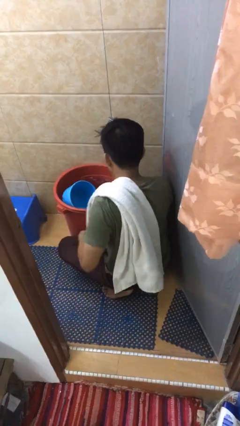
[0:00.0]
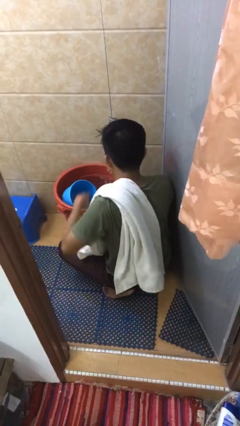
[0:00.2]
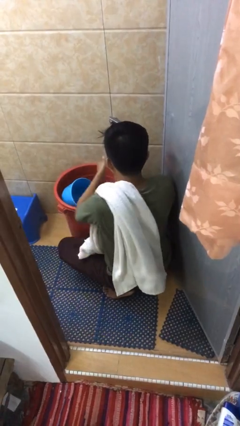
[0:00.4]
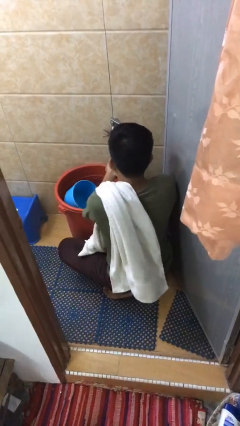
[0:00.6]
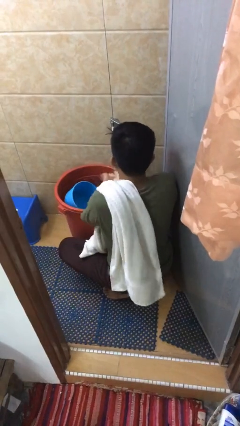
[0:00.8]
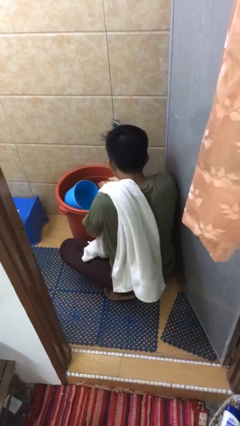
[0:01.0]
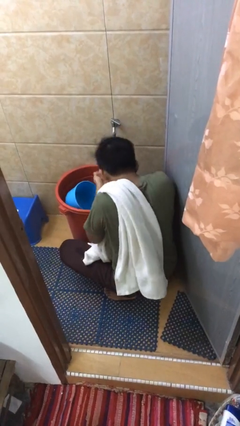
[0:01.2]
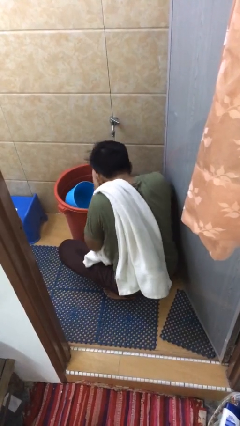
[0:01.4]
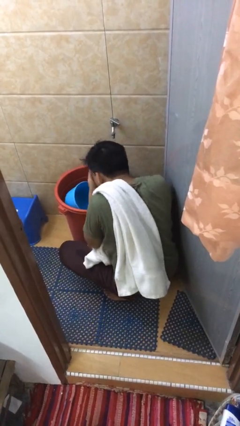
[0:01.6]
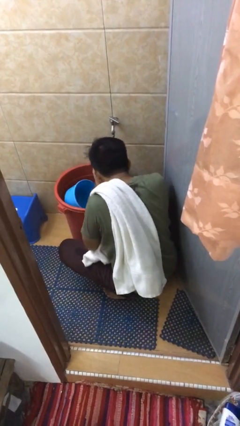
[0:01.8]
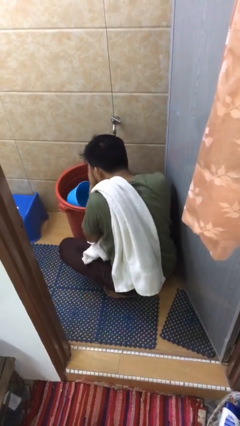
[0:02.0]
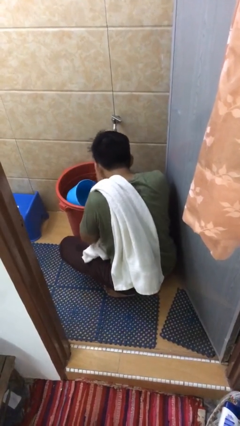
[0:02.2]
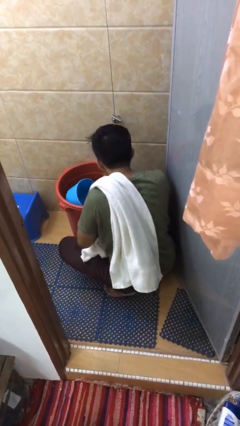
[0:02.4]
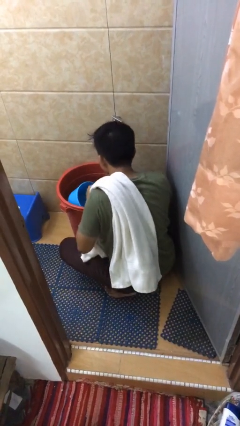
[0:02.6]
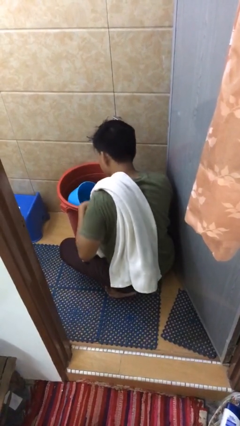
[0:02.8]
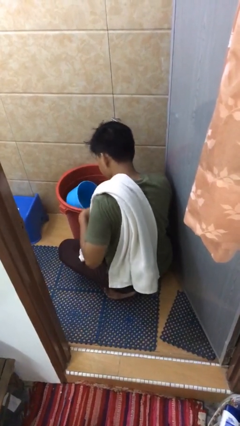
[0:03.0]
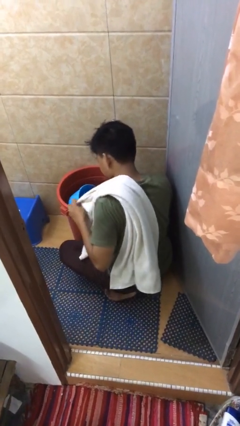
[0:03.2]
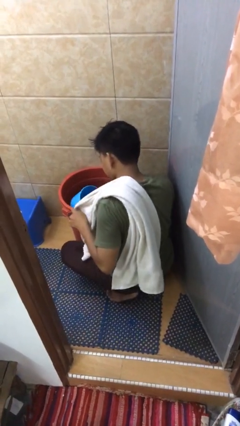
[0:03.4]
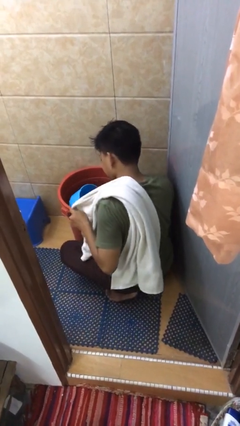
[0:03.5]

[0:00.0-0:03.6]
person washes face

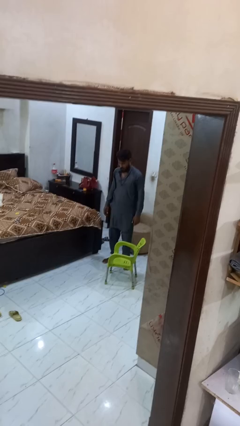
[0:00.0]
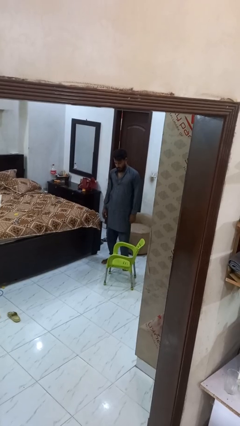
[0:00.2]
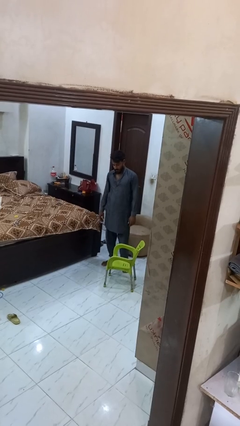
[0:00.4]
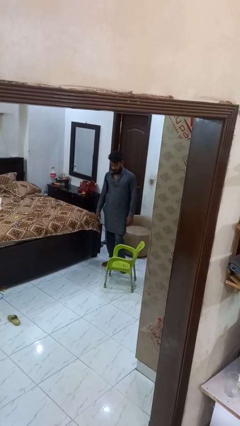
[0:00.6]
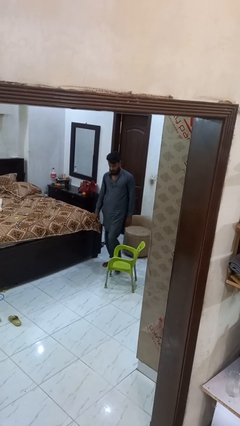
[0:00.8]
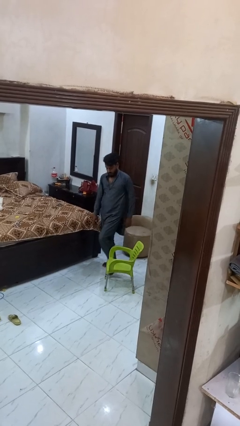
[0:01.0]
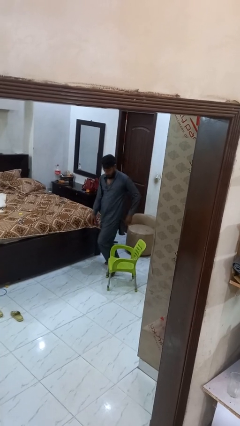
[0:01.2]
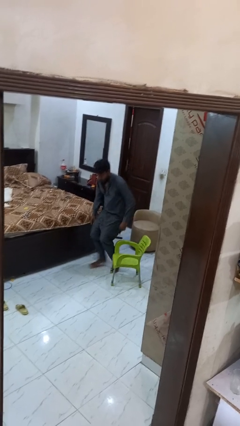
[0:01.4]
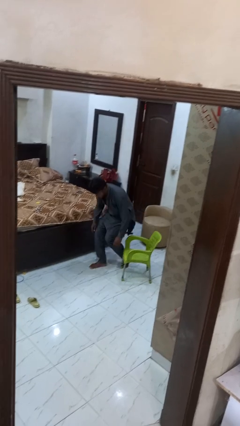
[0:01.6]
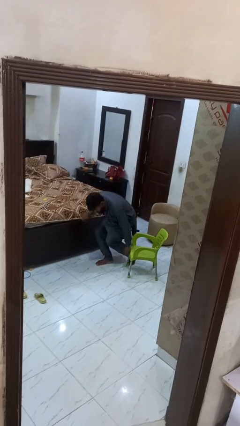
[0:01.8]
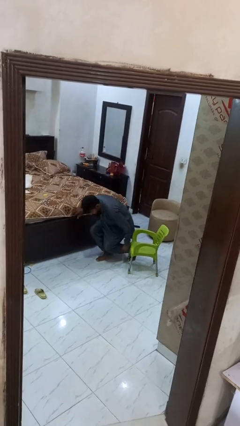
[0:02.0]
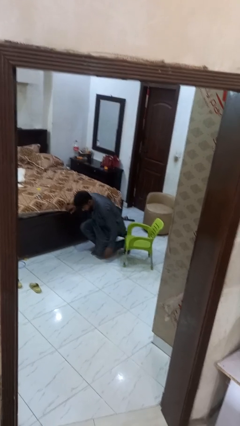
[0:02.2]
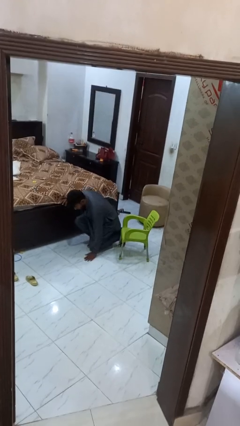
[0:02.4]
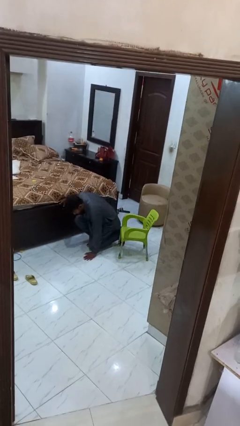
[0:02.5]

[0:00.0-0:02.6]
person trips on object on floor

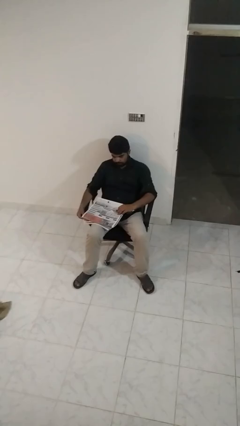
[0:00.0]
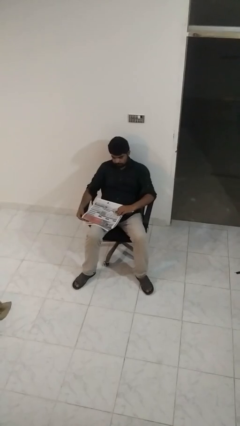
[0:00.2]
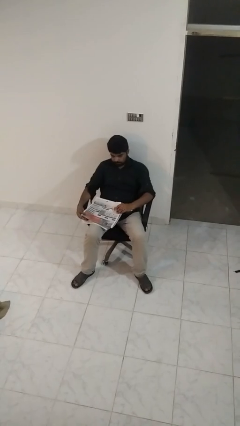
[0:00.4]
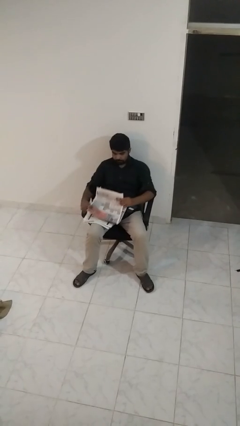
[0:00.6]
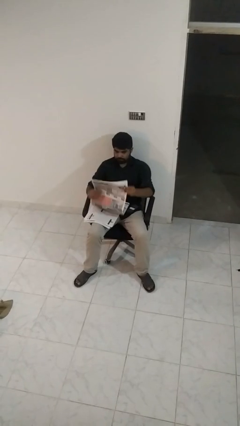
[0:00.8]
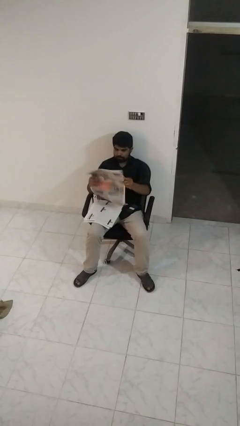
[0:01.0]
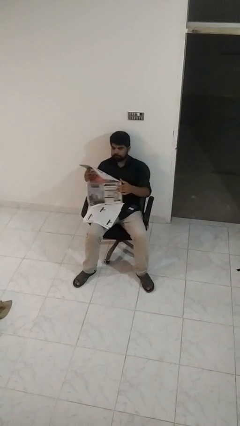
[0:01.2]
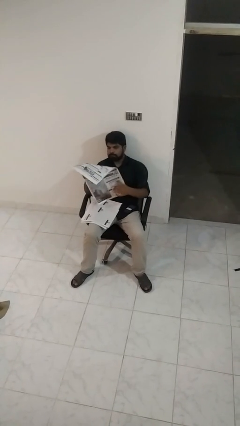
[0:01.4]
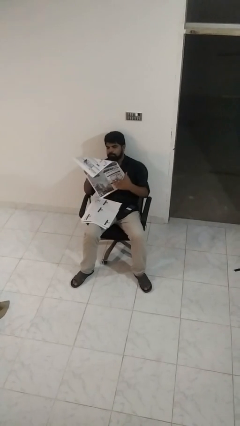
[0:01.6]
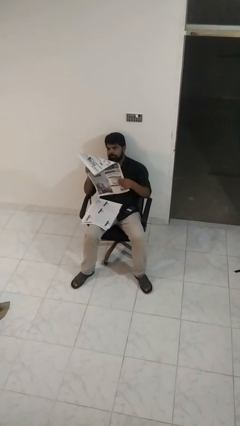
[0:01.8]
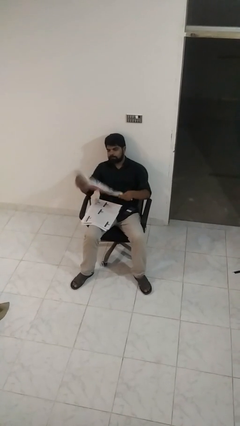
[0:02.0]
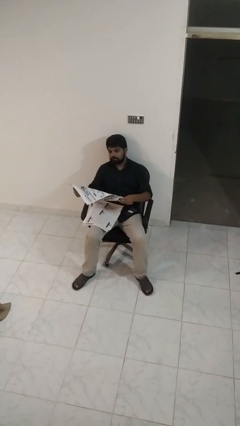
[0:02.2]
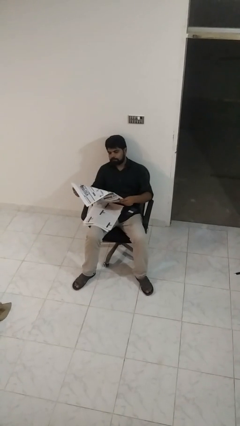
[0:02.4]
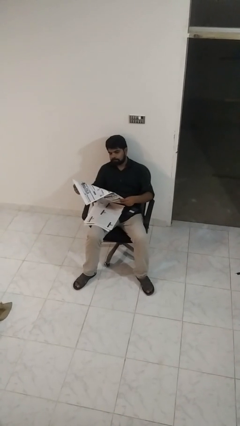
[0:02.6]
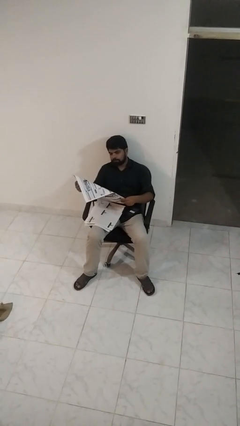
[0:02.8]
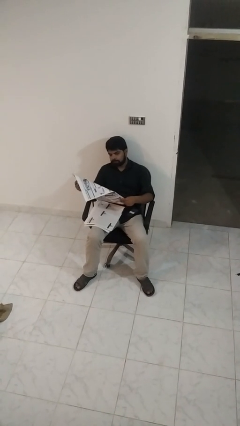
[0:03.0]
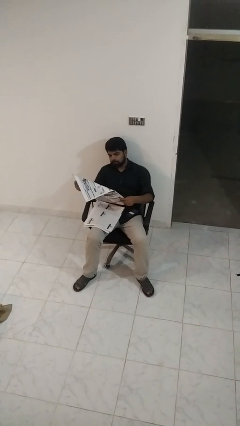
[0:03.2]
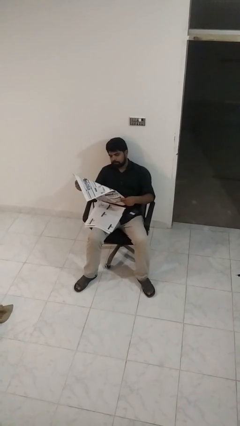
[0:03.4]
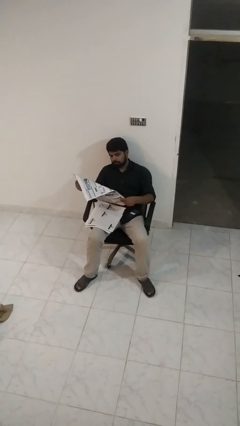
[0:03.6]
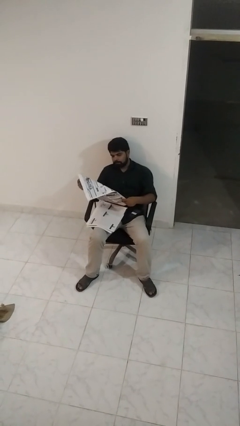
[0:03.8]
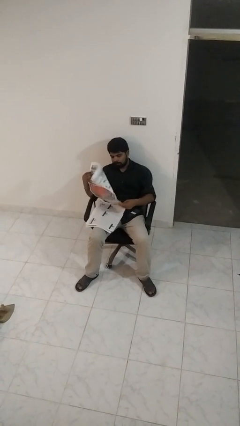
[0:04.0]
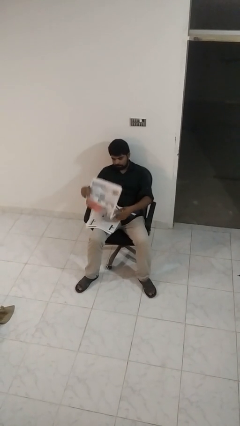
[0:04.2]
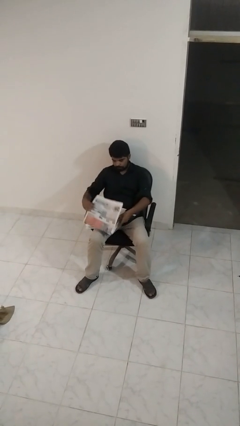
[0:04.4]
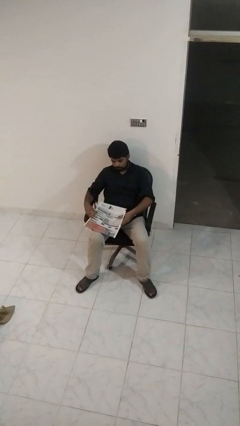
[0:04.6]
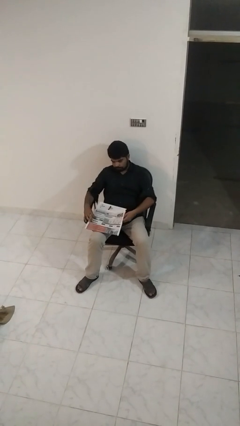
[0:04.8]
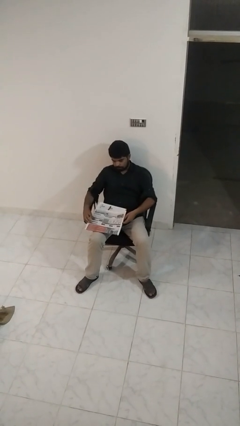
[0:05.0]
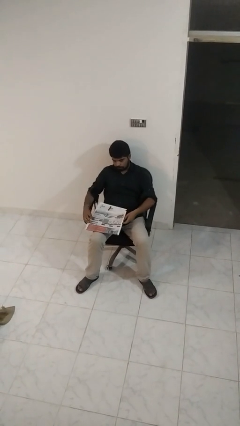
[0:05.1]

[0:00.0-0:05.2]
person reads newspaper

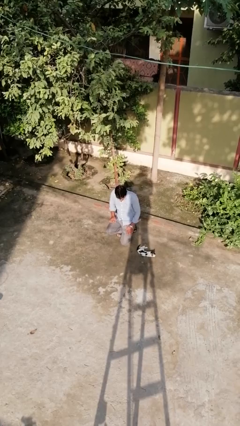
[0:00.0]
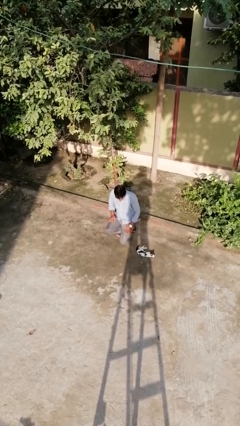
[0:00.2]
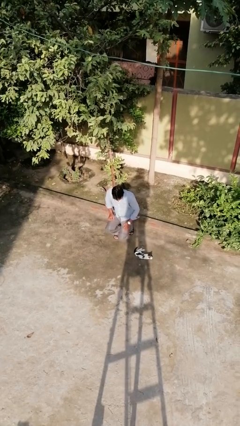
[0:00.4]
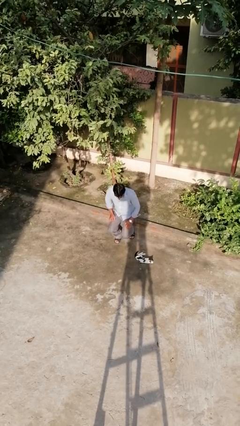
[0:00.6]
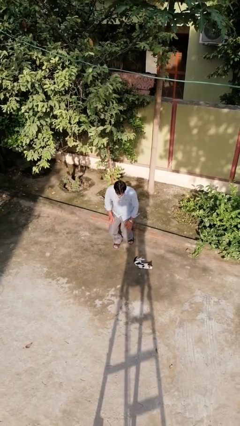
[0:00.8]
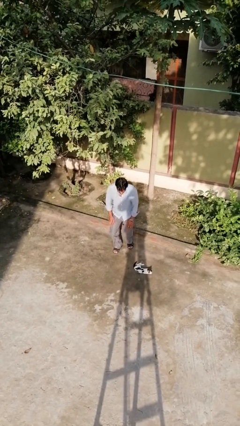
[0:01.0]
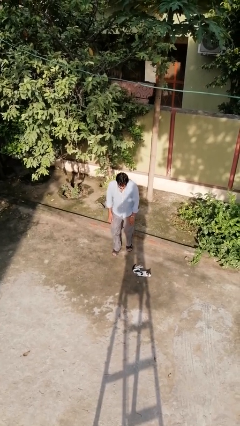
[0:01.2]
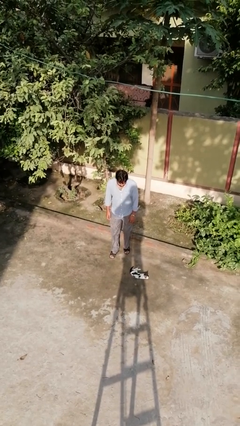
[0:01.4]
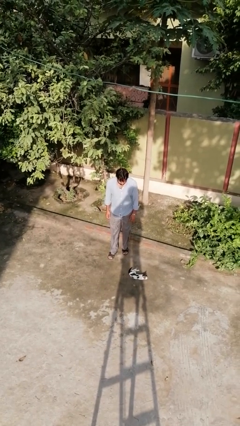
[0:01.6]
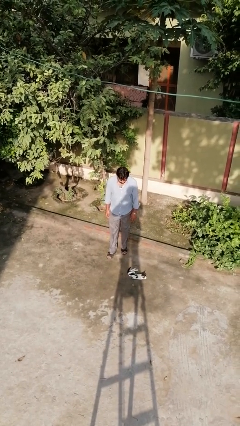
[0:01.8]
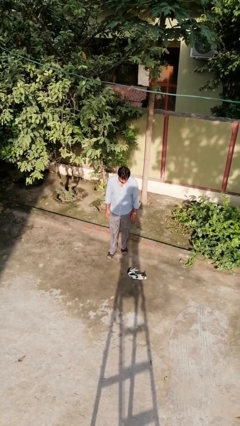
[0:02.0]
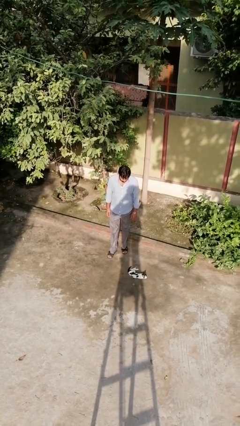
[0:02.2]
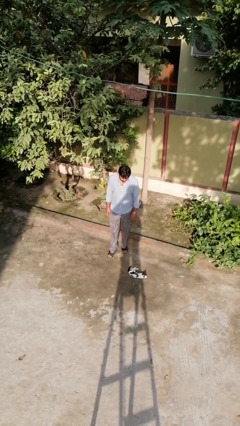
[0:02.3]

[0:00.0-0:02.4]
person stands up from floor

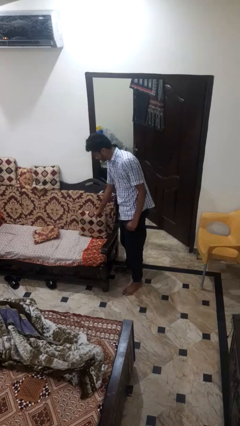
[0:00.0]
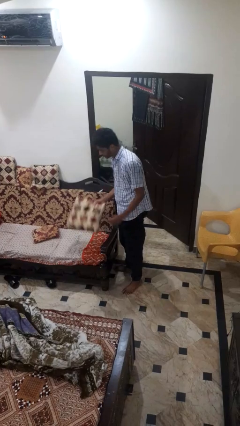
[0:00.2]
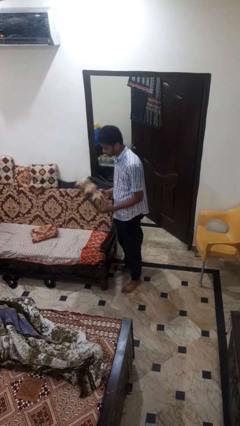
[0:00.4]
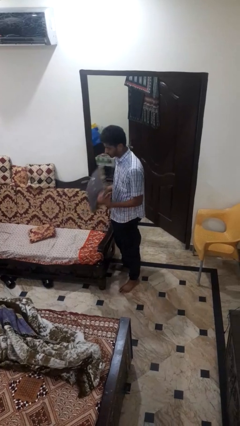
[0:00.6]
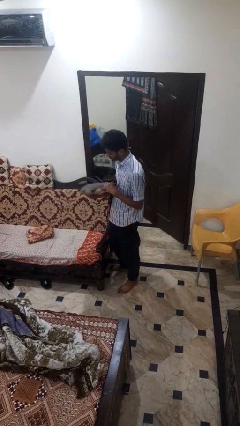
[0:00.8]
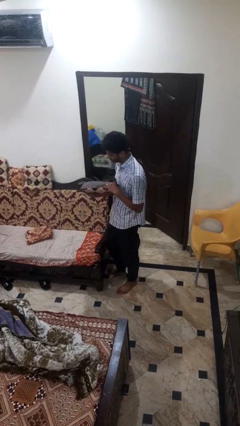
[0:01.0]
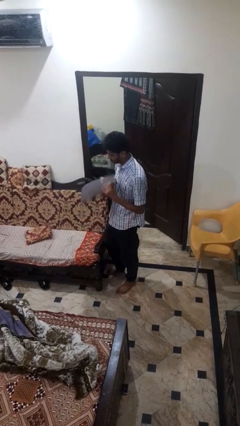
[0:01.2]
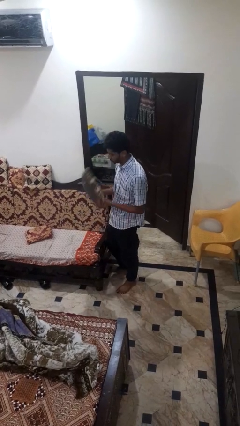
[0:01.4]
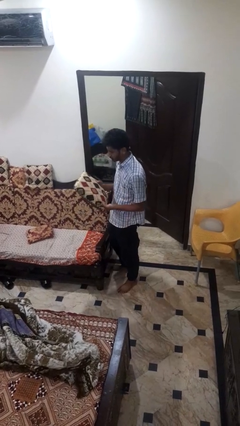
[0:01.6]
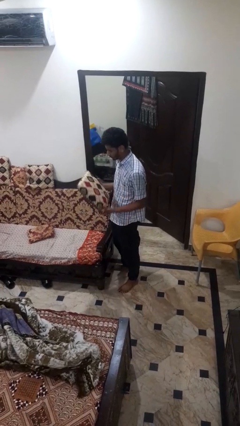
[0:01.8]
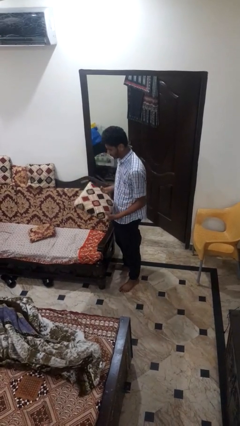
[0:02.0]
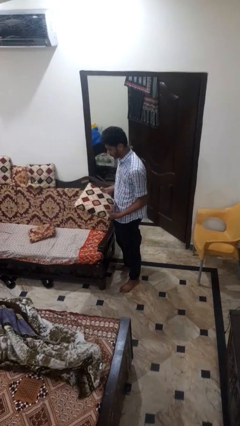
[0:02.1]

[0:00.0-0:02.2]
person picks up object from couch

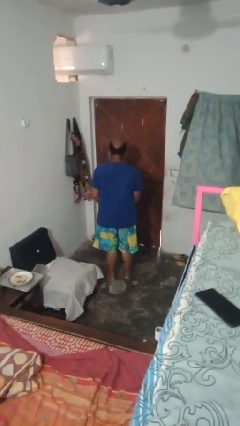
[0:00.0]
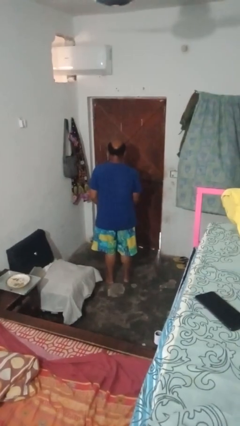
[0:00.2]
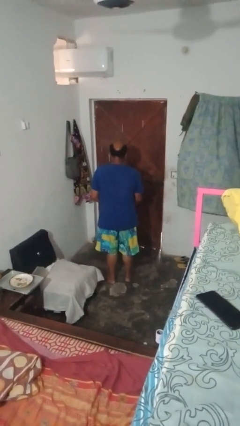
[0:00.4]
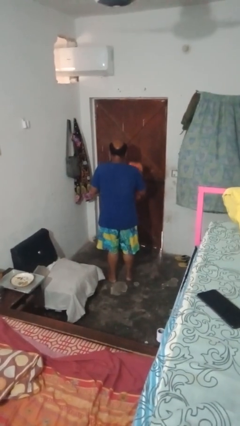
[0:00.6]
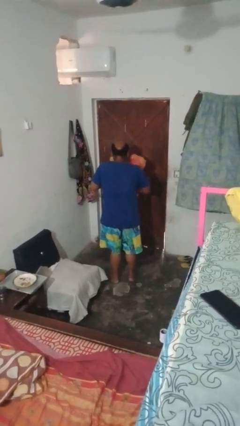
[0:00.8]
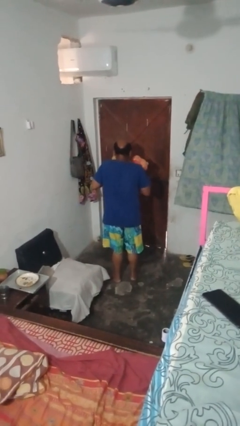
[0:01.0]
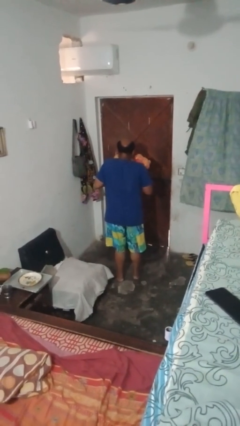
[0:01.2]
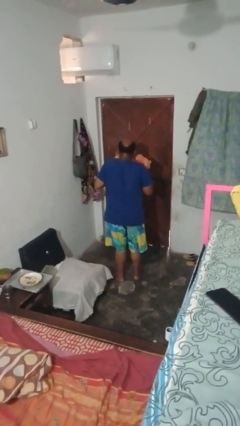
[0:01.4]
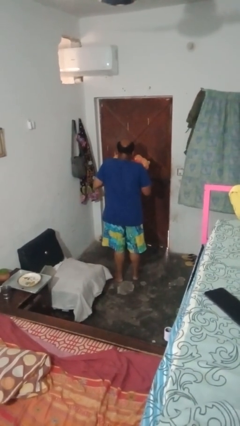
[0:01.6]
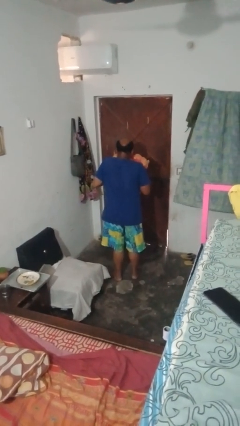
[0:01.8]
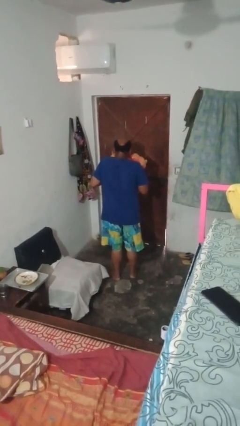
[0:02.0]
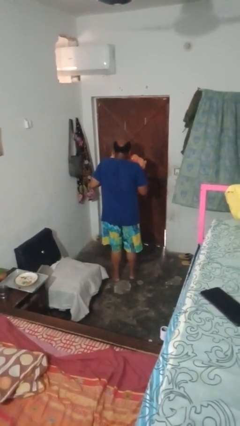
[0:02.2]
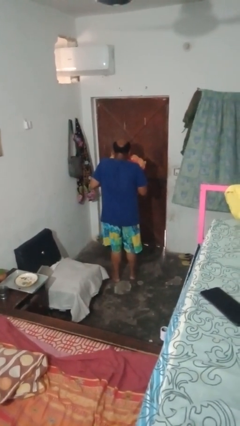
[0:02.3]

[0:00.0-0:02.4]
person hugs stuffed animal
